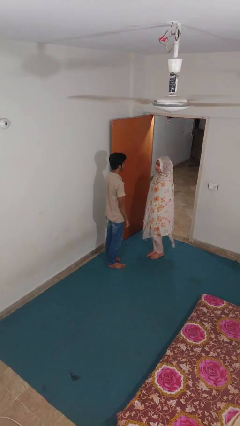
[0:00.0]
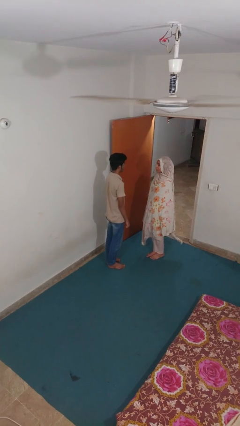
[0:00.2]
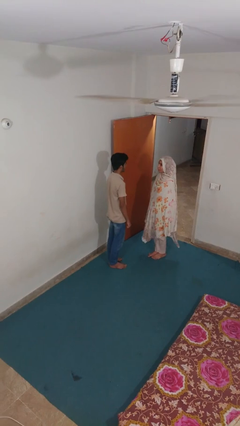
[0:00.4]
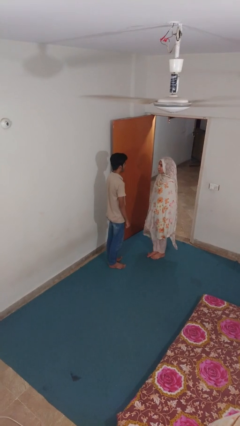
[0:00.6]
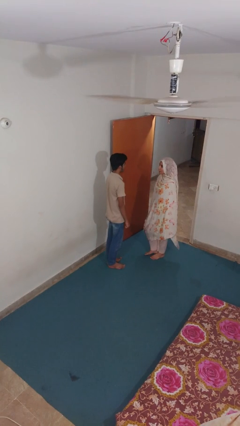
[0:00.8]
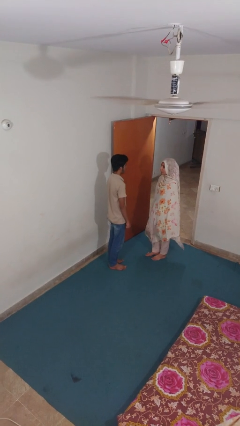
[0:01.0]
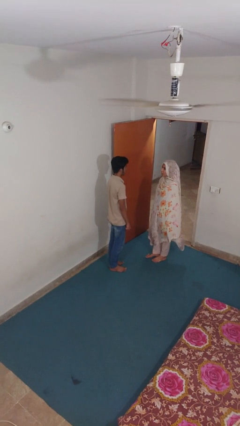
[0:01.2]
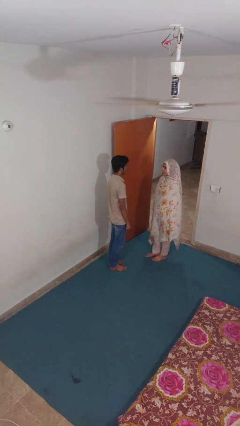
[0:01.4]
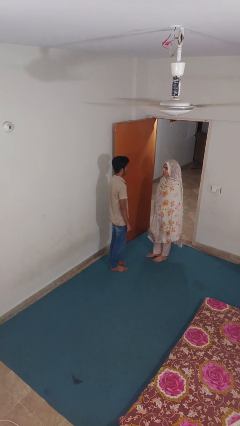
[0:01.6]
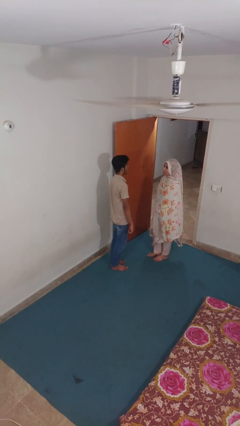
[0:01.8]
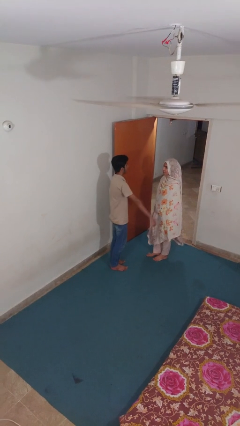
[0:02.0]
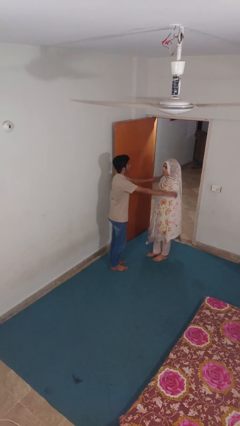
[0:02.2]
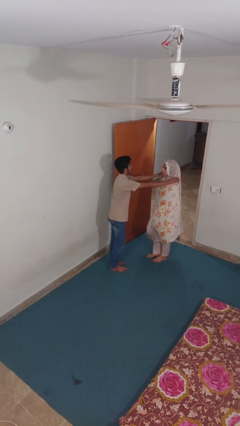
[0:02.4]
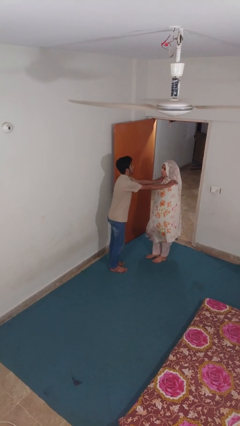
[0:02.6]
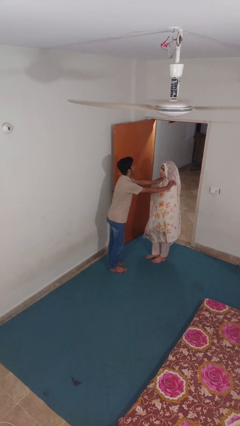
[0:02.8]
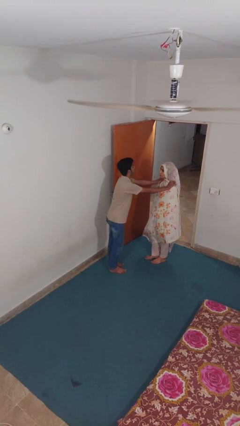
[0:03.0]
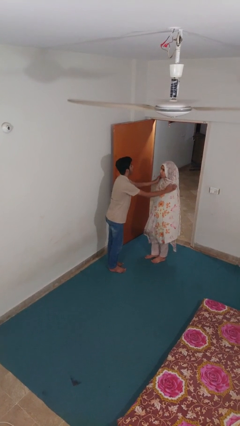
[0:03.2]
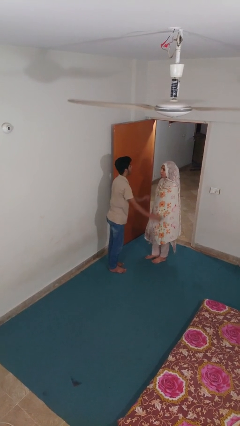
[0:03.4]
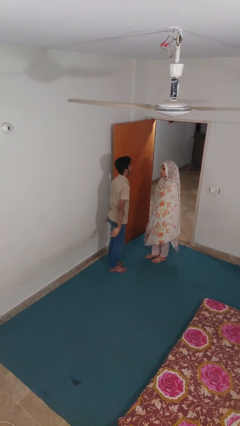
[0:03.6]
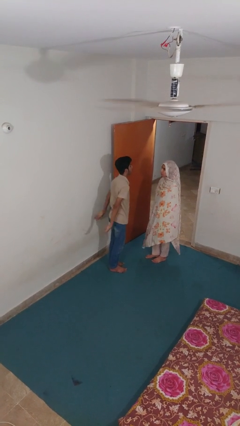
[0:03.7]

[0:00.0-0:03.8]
person pounds shoulders of person

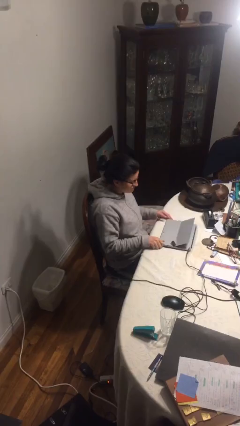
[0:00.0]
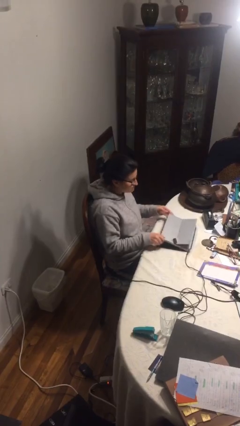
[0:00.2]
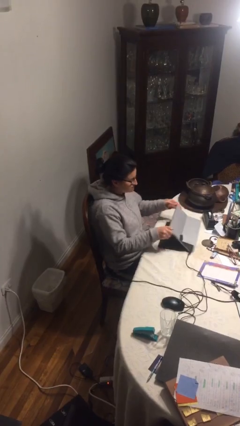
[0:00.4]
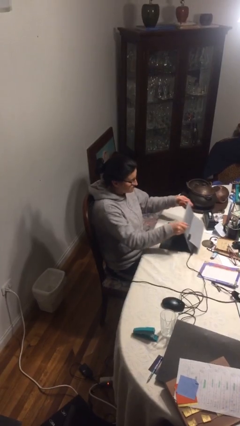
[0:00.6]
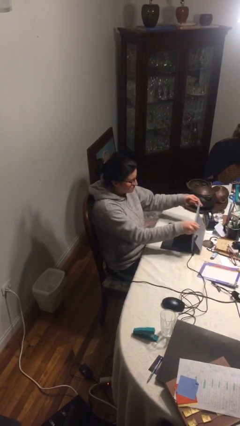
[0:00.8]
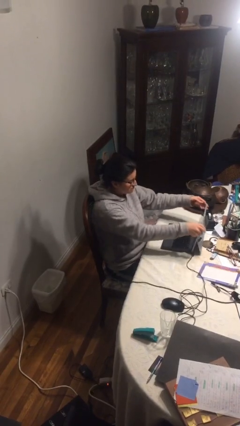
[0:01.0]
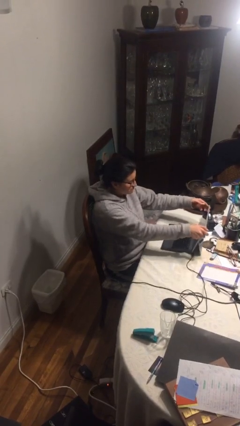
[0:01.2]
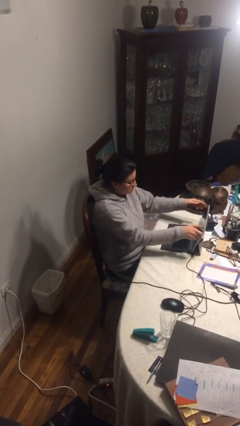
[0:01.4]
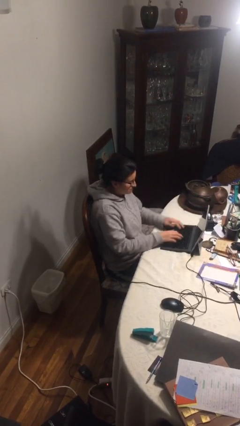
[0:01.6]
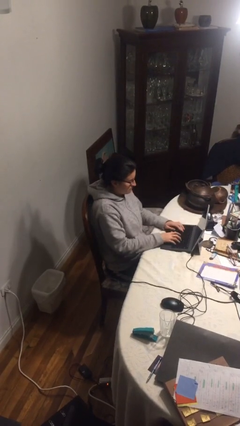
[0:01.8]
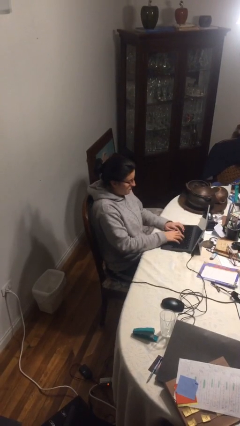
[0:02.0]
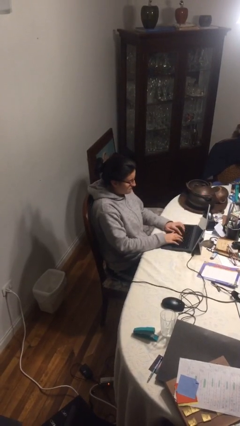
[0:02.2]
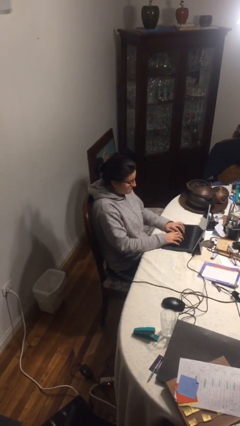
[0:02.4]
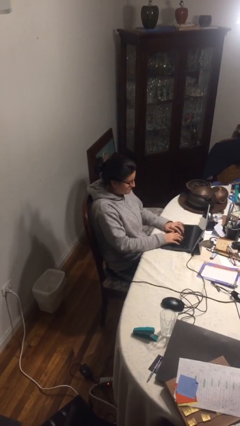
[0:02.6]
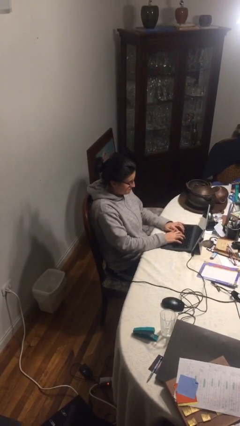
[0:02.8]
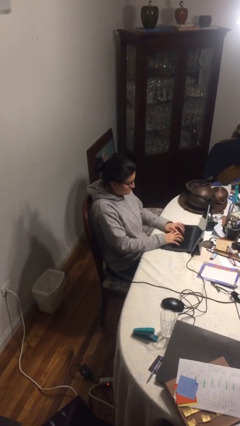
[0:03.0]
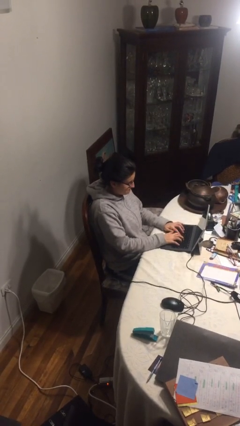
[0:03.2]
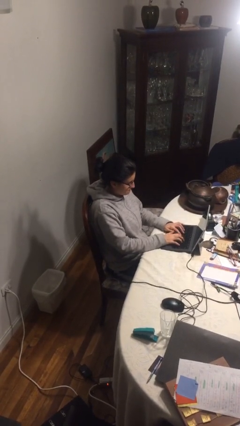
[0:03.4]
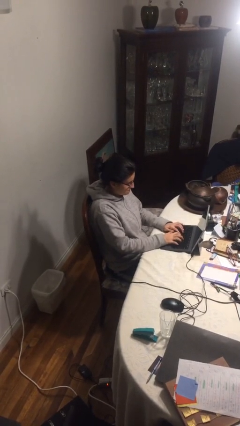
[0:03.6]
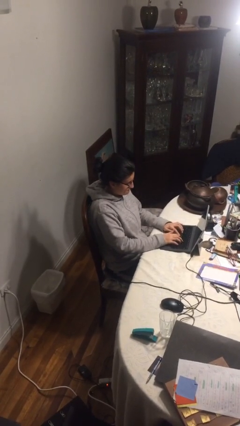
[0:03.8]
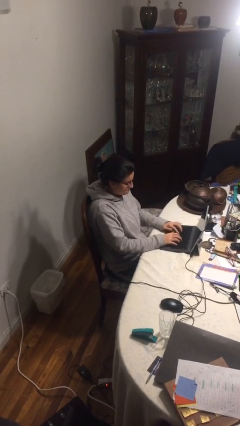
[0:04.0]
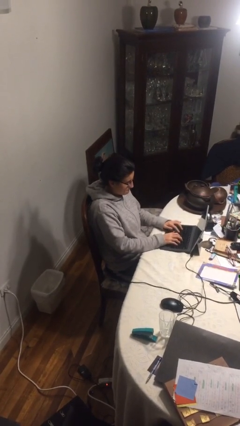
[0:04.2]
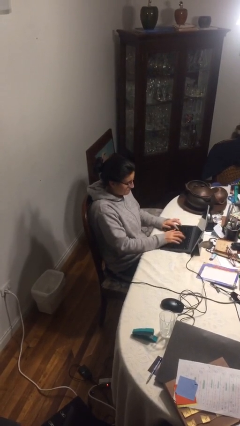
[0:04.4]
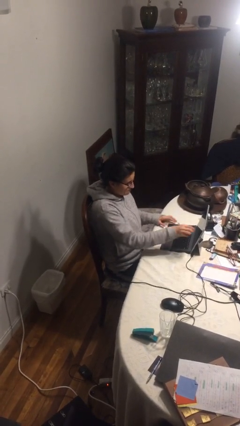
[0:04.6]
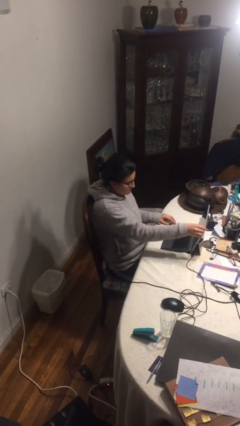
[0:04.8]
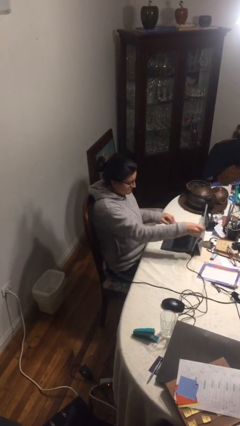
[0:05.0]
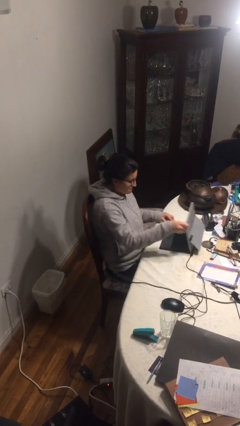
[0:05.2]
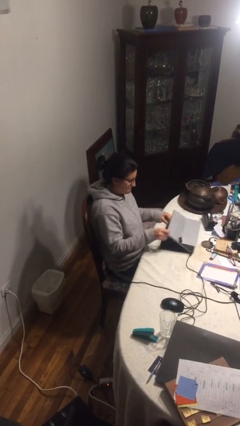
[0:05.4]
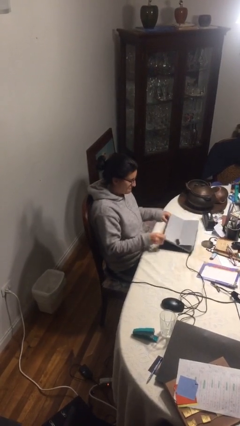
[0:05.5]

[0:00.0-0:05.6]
person interacts with laptop

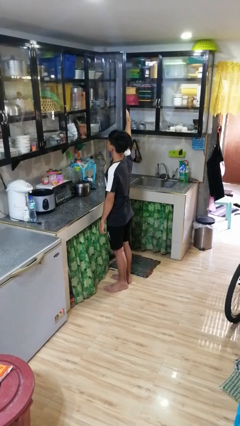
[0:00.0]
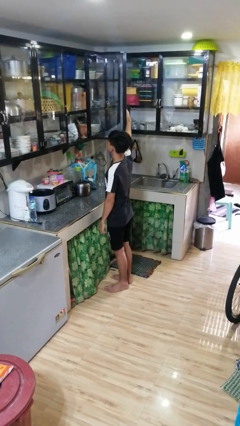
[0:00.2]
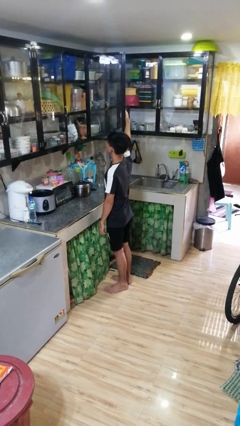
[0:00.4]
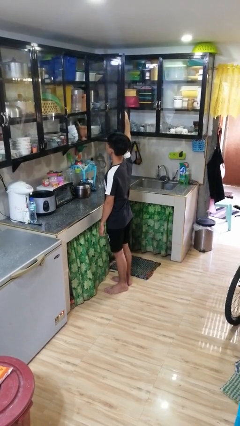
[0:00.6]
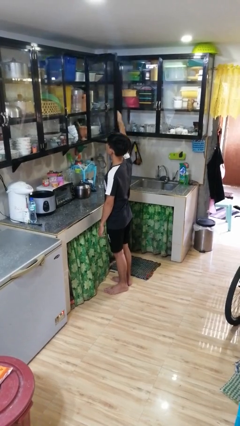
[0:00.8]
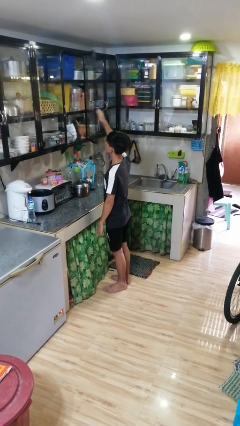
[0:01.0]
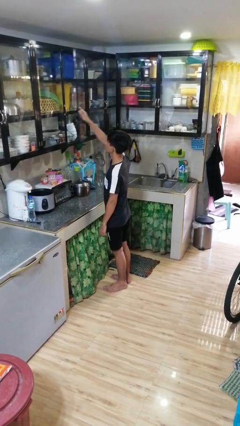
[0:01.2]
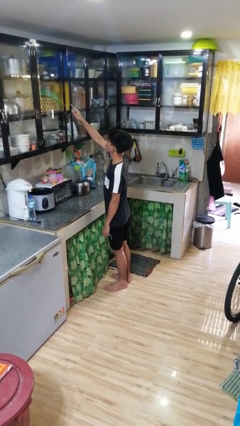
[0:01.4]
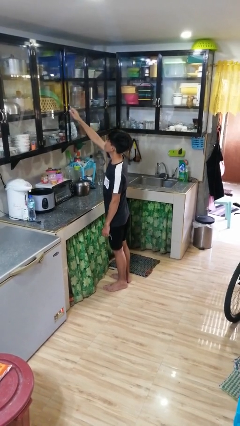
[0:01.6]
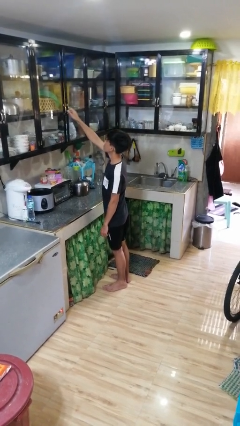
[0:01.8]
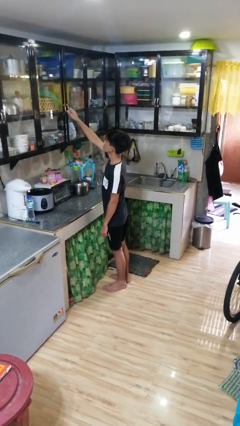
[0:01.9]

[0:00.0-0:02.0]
person closes cabinet

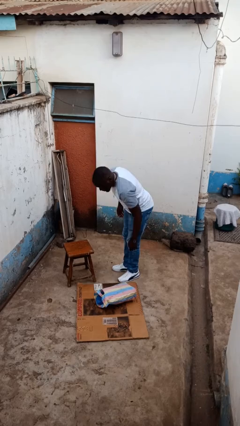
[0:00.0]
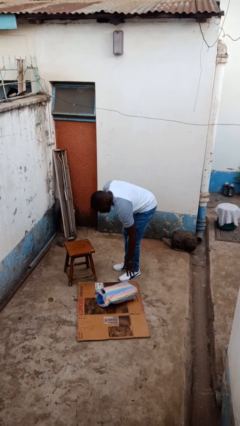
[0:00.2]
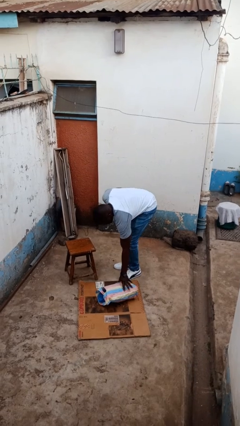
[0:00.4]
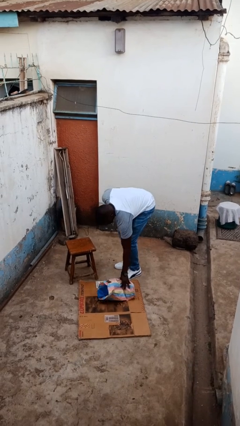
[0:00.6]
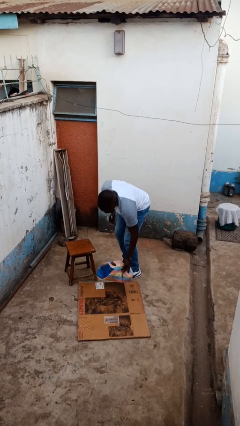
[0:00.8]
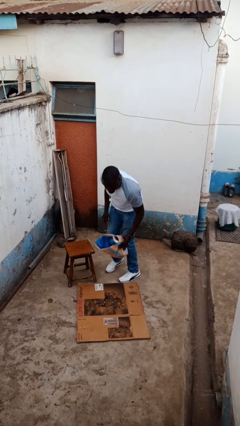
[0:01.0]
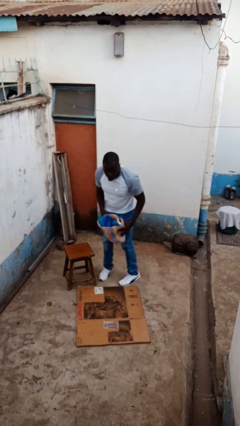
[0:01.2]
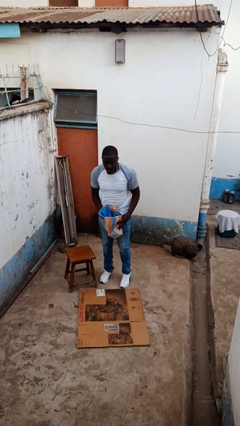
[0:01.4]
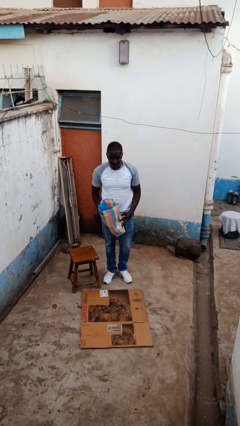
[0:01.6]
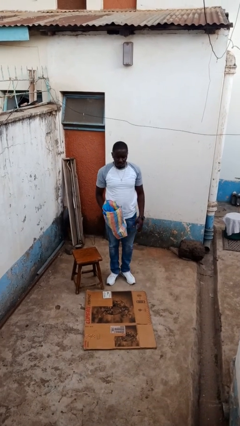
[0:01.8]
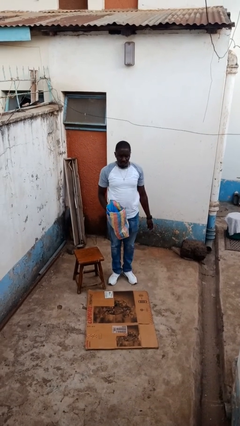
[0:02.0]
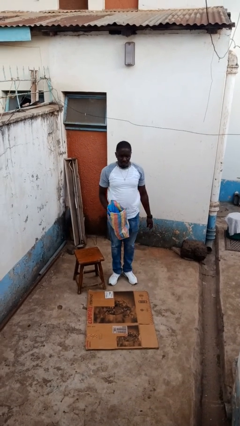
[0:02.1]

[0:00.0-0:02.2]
person picks up object from floor

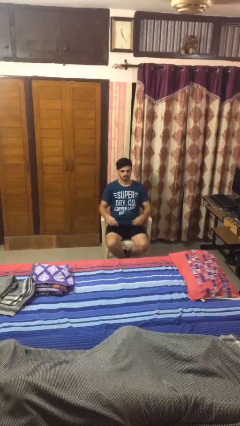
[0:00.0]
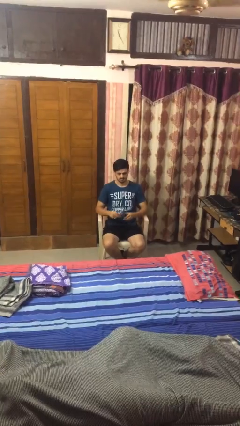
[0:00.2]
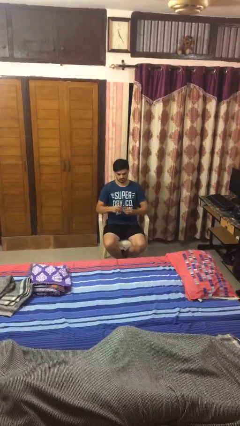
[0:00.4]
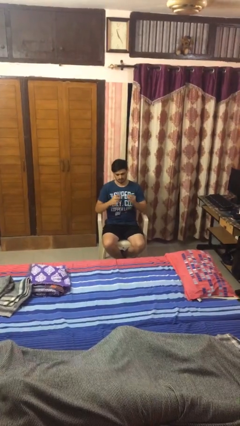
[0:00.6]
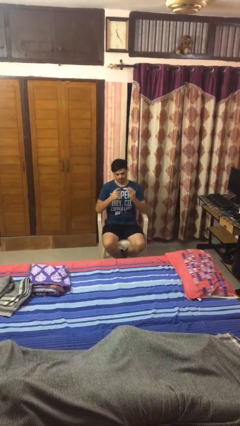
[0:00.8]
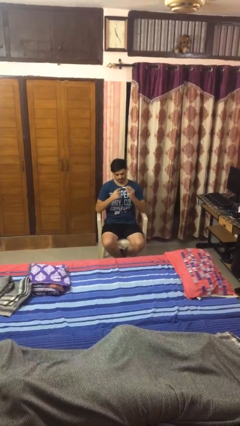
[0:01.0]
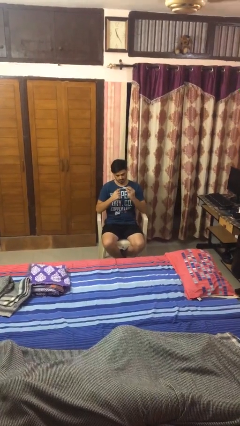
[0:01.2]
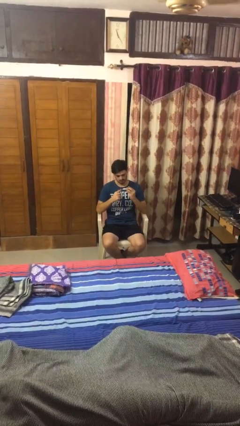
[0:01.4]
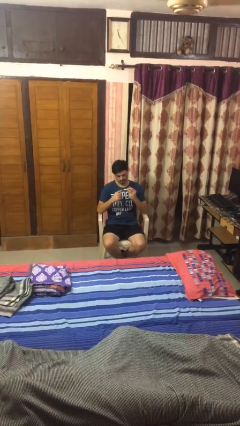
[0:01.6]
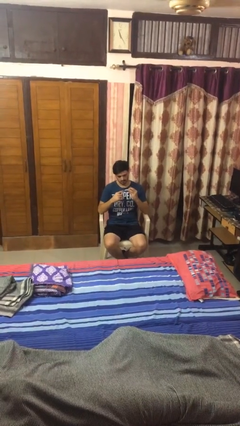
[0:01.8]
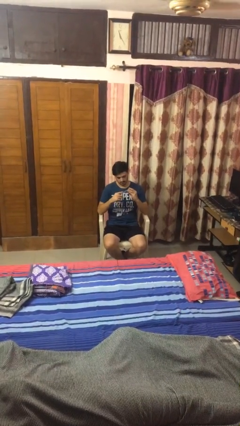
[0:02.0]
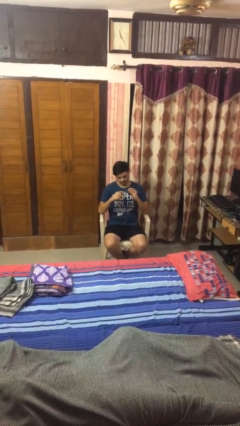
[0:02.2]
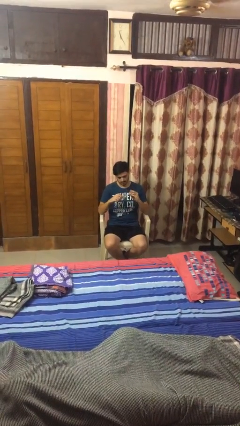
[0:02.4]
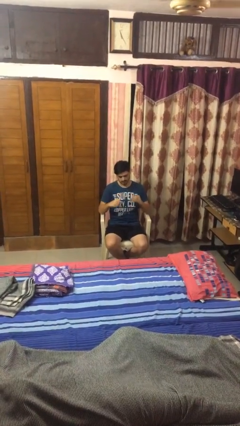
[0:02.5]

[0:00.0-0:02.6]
person clips fingernails

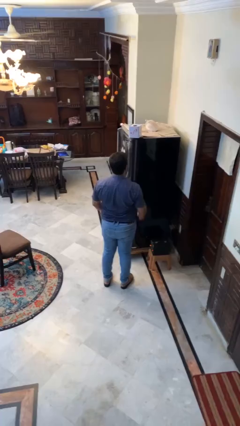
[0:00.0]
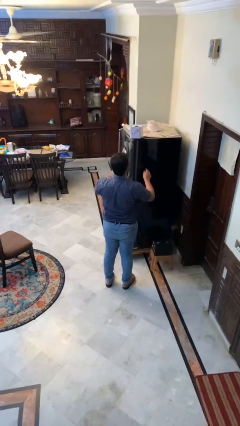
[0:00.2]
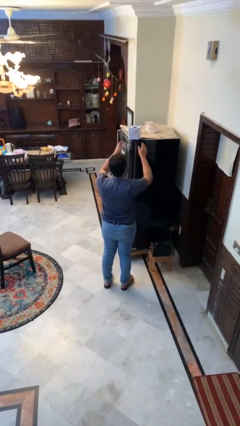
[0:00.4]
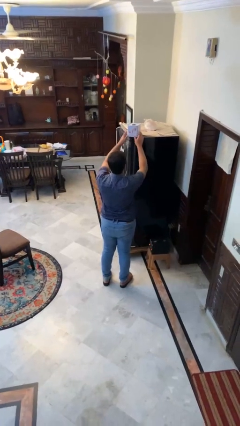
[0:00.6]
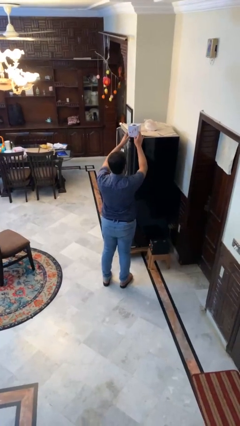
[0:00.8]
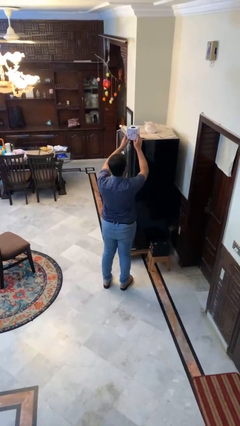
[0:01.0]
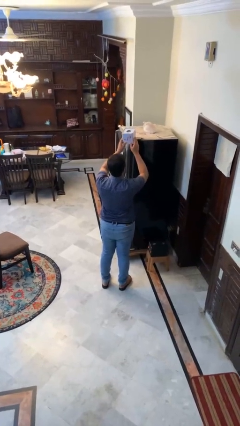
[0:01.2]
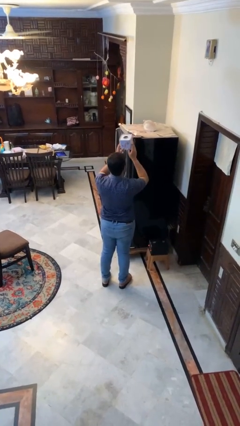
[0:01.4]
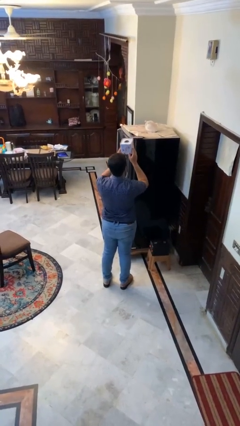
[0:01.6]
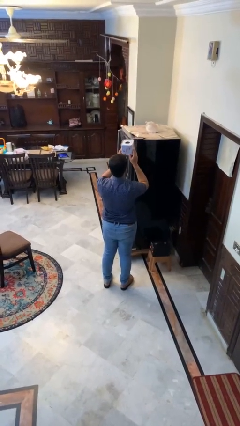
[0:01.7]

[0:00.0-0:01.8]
person picks up object from shelf
